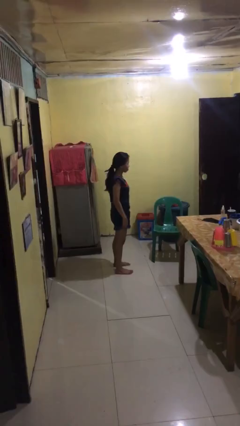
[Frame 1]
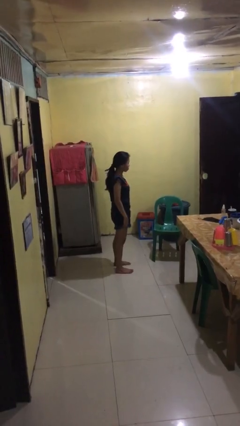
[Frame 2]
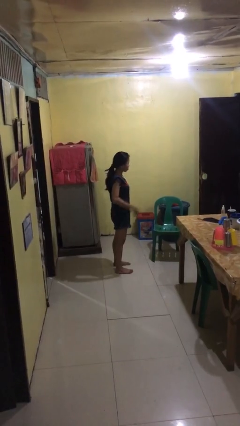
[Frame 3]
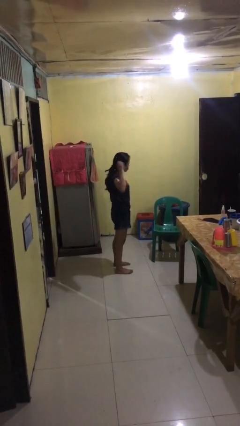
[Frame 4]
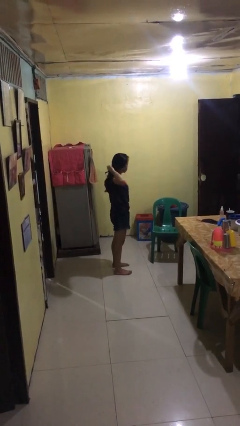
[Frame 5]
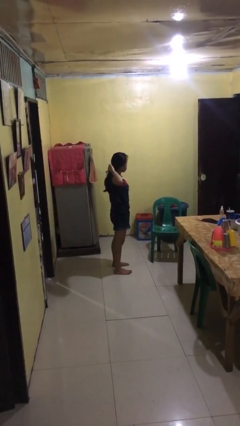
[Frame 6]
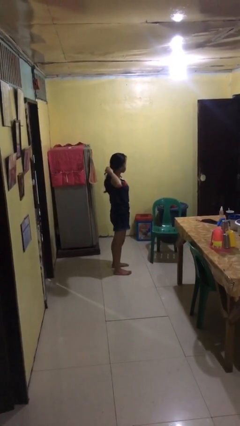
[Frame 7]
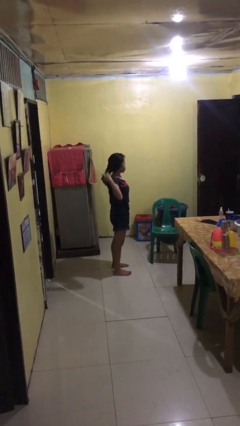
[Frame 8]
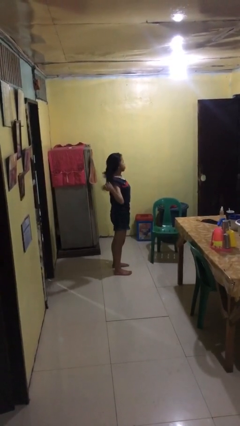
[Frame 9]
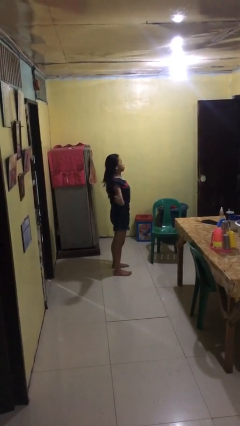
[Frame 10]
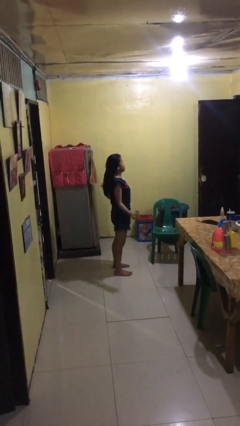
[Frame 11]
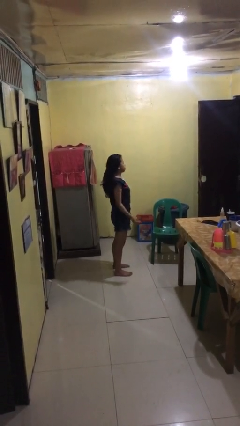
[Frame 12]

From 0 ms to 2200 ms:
person takes off hairtie

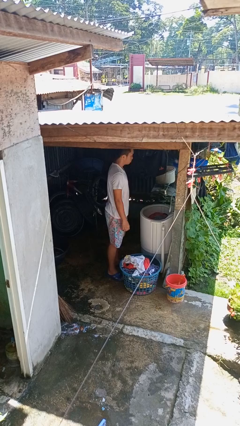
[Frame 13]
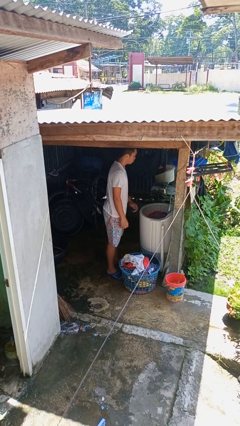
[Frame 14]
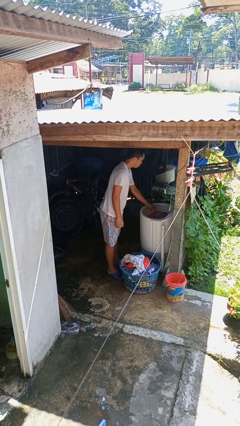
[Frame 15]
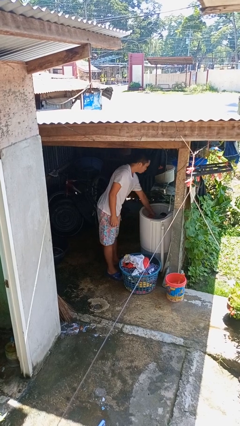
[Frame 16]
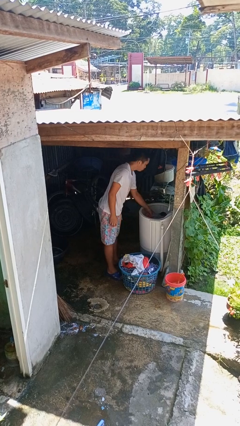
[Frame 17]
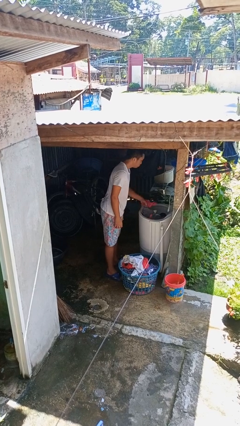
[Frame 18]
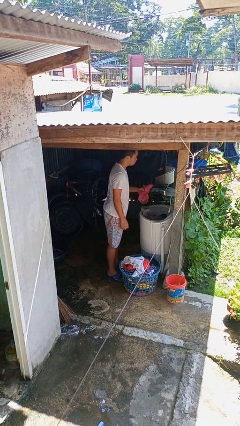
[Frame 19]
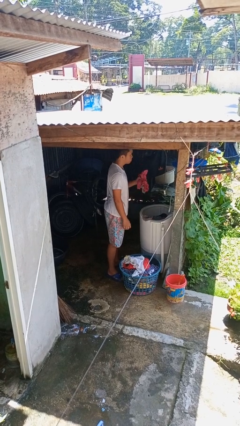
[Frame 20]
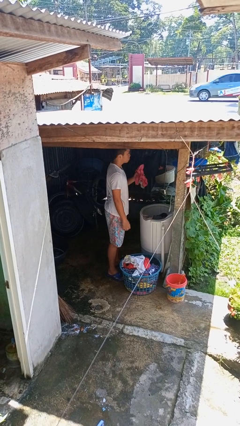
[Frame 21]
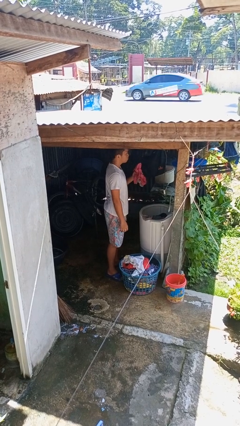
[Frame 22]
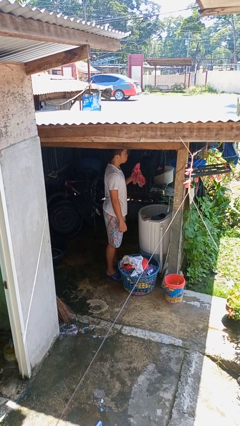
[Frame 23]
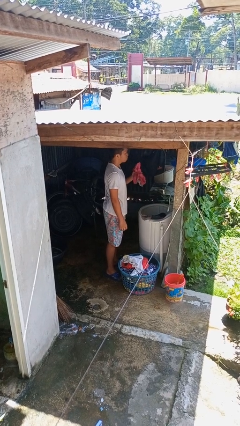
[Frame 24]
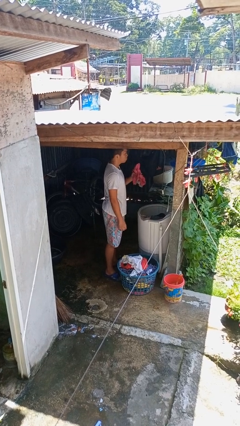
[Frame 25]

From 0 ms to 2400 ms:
person unloads clotheswasher

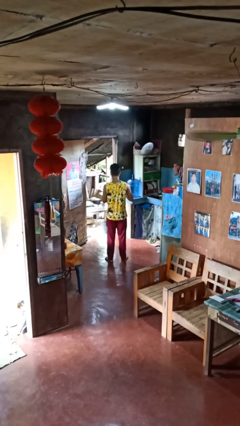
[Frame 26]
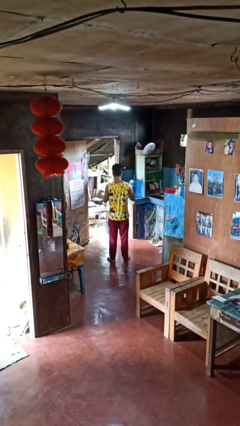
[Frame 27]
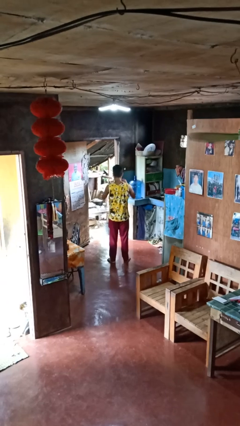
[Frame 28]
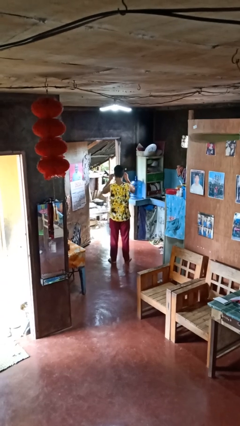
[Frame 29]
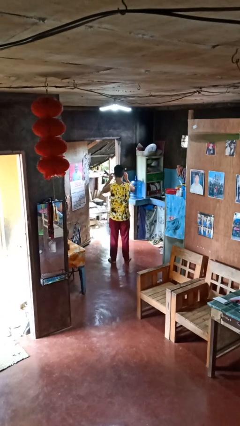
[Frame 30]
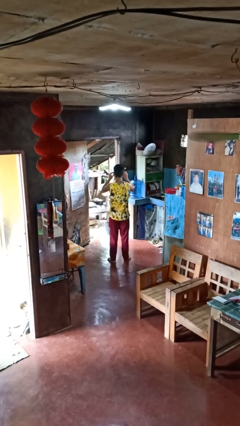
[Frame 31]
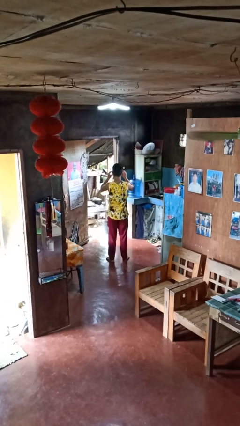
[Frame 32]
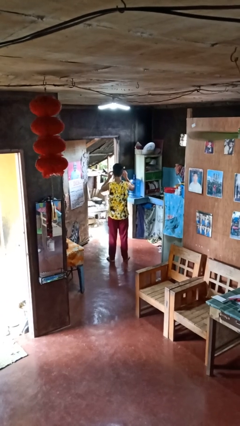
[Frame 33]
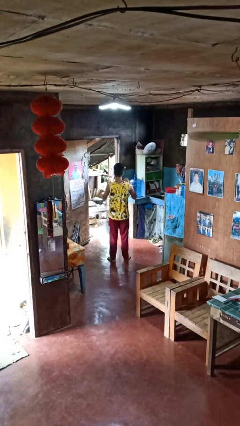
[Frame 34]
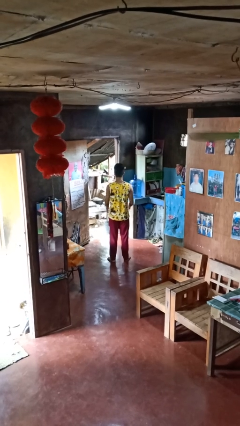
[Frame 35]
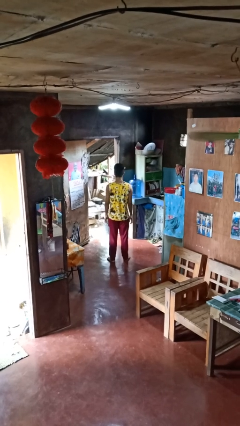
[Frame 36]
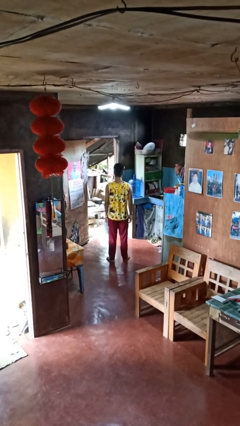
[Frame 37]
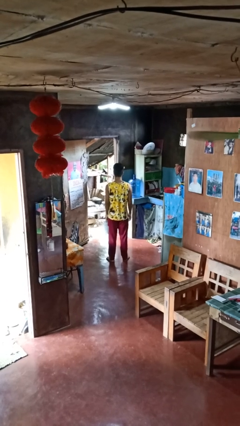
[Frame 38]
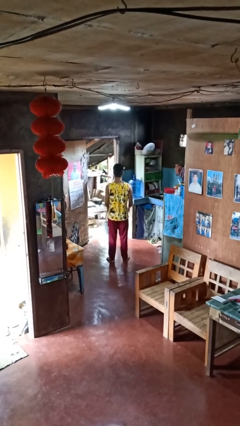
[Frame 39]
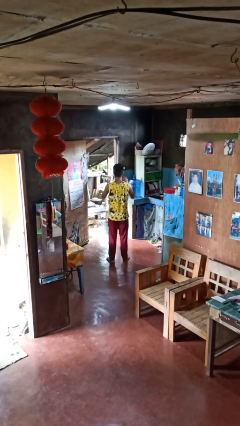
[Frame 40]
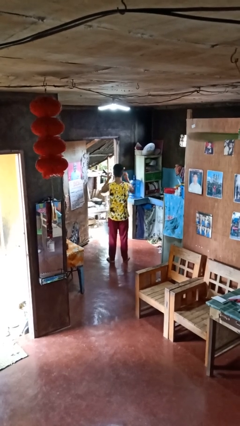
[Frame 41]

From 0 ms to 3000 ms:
person puts on glasses

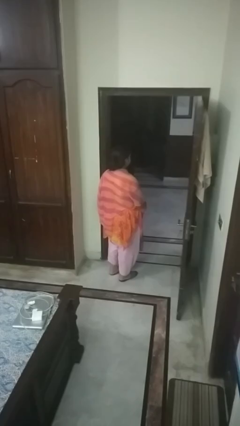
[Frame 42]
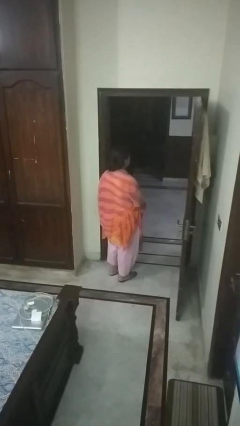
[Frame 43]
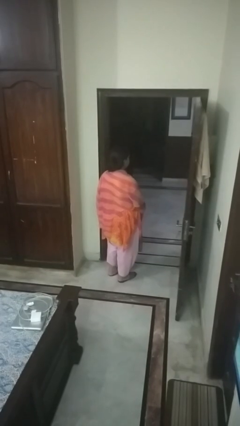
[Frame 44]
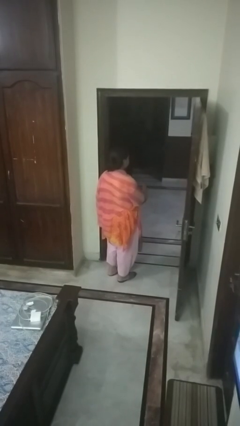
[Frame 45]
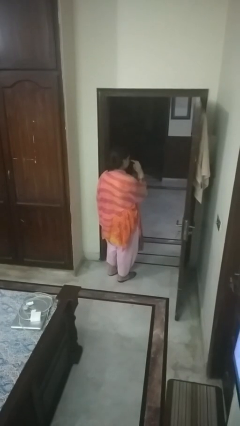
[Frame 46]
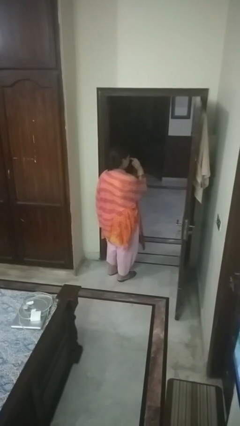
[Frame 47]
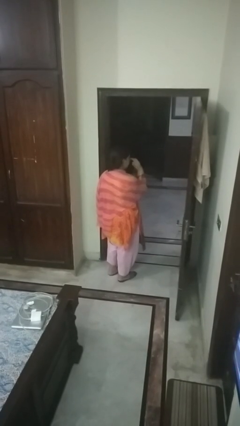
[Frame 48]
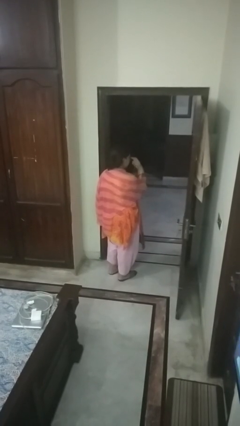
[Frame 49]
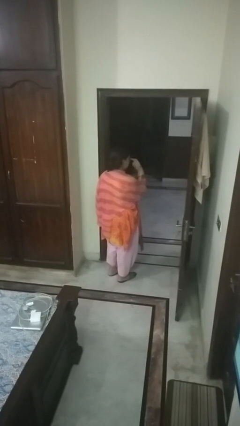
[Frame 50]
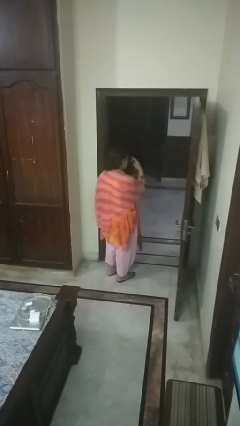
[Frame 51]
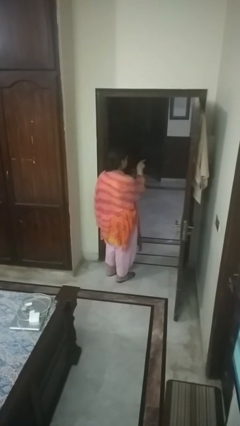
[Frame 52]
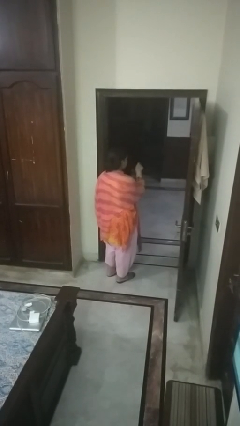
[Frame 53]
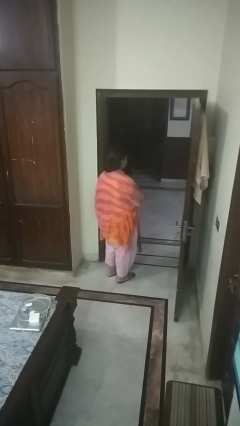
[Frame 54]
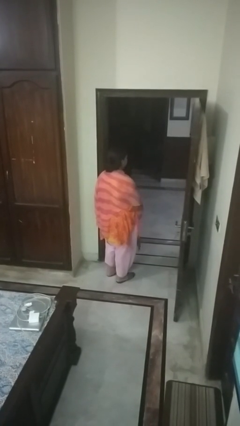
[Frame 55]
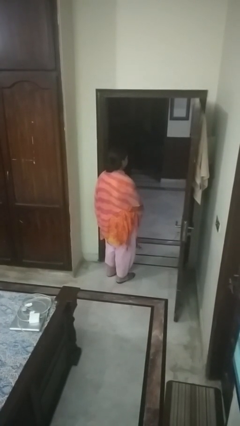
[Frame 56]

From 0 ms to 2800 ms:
person gestures watch closely

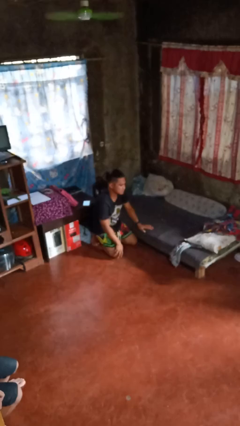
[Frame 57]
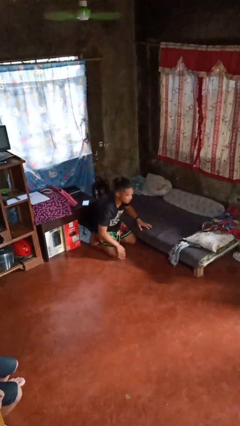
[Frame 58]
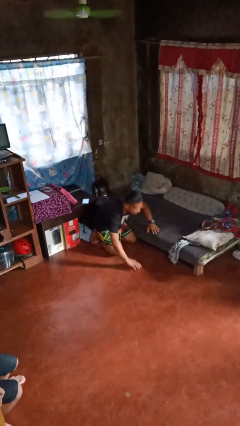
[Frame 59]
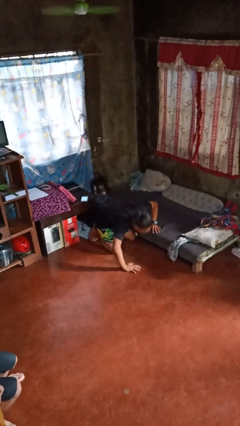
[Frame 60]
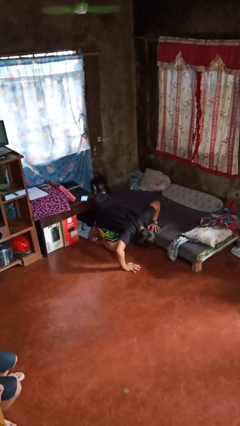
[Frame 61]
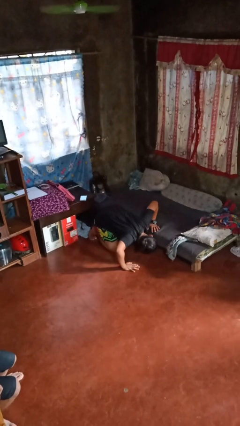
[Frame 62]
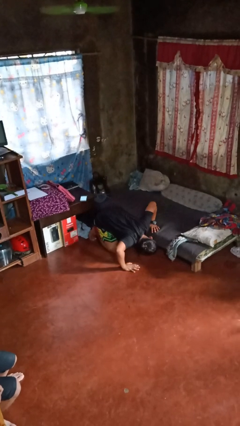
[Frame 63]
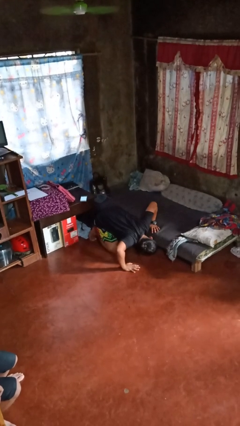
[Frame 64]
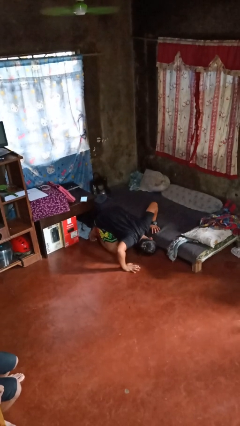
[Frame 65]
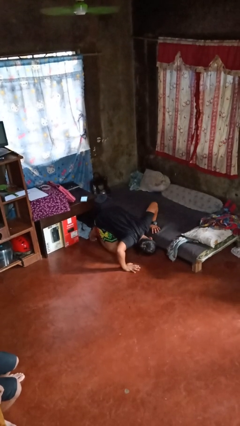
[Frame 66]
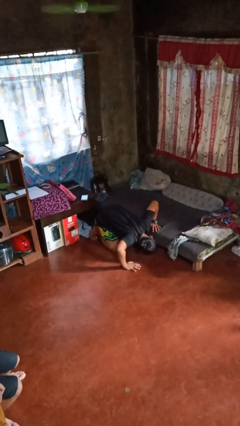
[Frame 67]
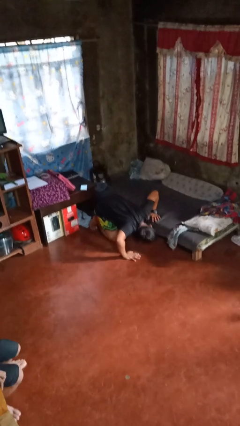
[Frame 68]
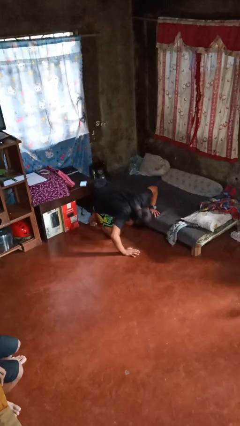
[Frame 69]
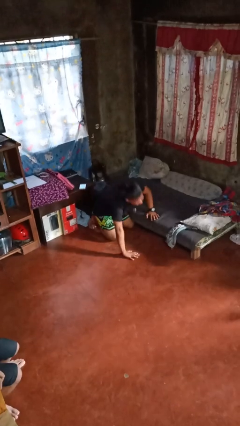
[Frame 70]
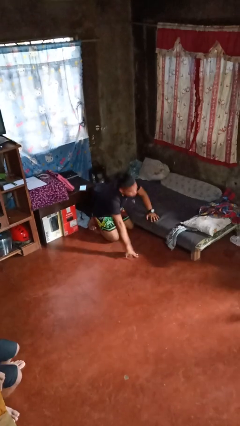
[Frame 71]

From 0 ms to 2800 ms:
person searches under bed

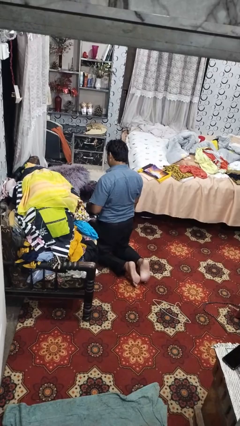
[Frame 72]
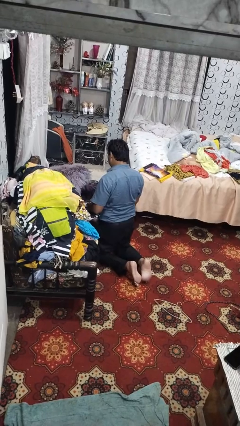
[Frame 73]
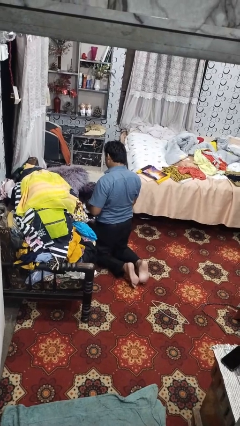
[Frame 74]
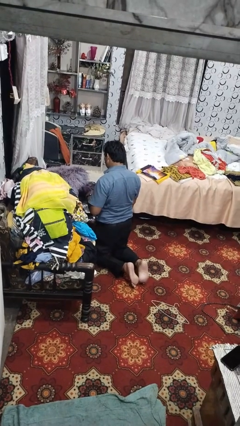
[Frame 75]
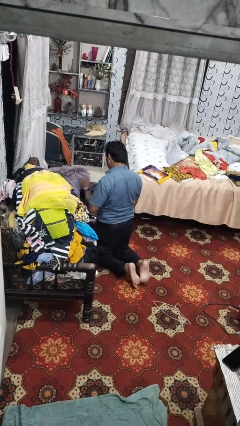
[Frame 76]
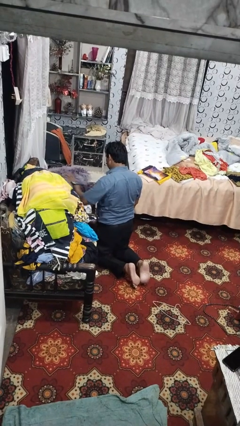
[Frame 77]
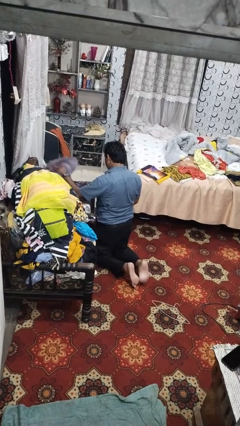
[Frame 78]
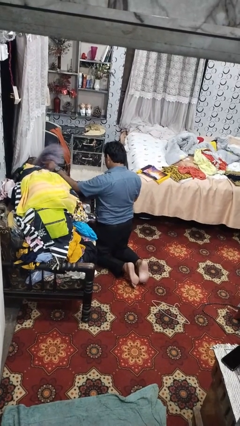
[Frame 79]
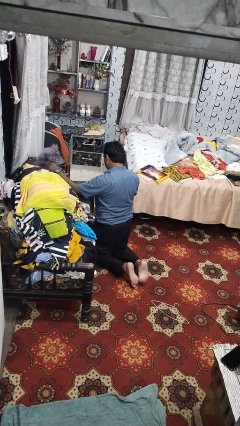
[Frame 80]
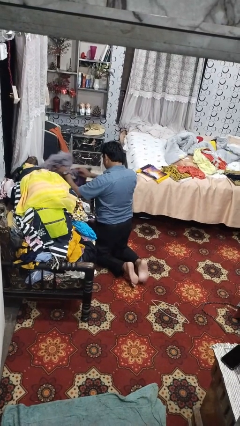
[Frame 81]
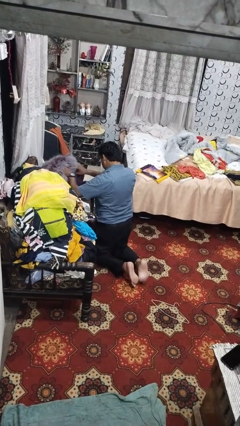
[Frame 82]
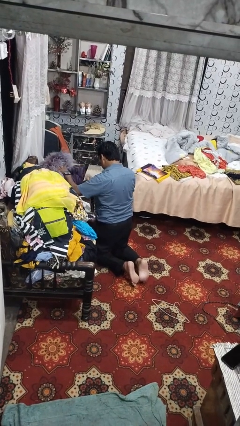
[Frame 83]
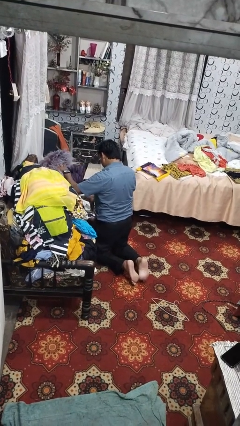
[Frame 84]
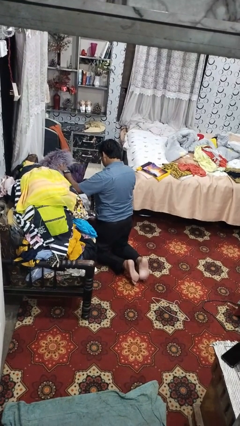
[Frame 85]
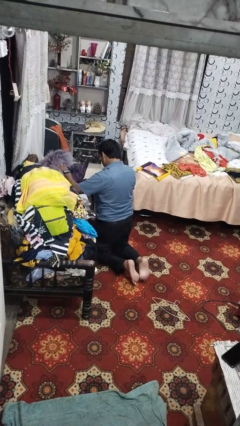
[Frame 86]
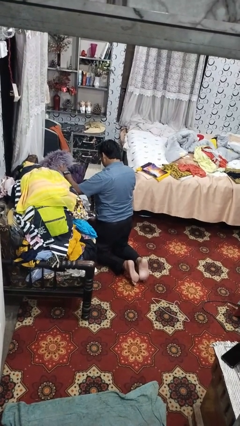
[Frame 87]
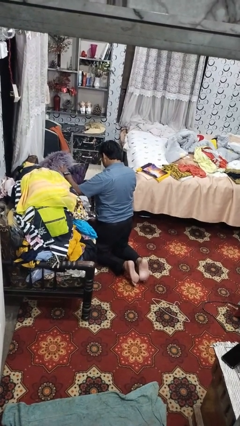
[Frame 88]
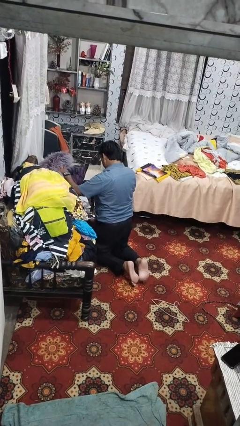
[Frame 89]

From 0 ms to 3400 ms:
person searches in couch

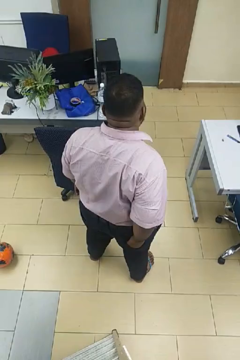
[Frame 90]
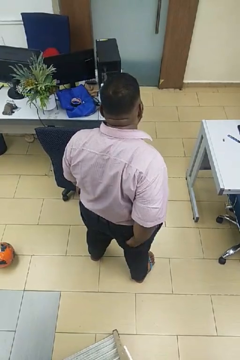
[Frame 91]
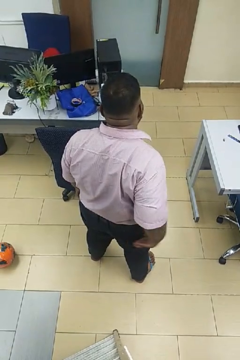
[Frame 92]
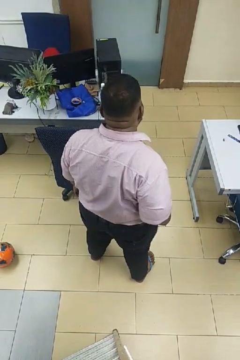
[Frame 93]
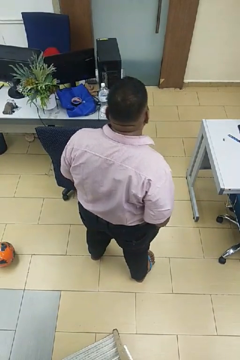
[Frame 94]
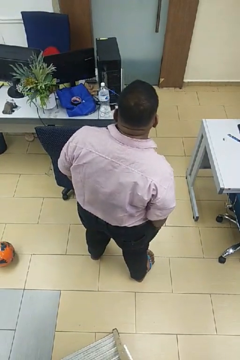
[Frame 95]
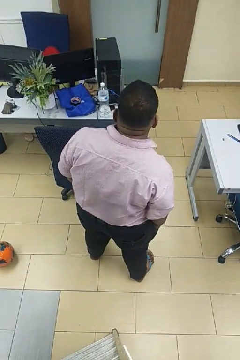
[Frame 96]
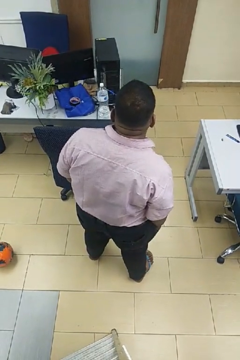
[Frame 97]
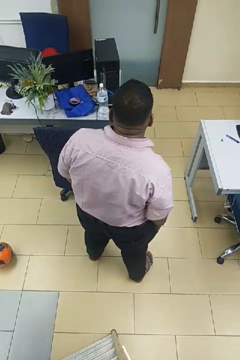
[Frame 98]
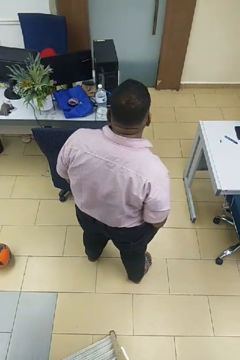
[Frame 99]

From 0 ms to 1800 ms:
person puts hands in back pockets
